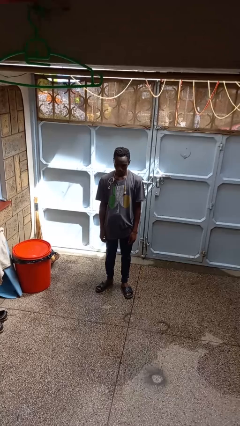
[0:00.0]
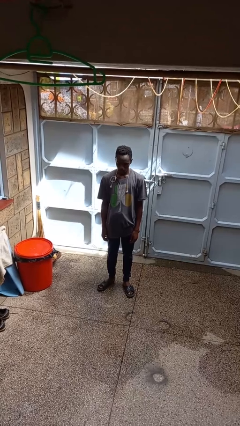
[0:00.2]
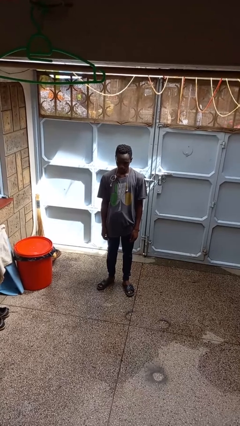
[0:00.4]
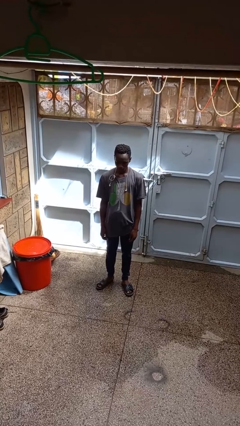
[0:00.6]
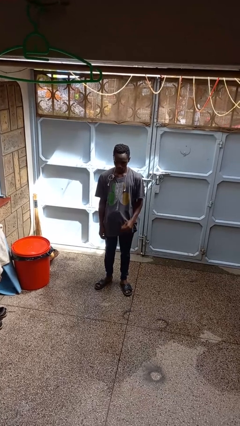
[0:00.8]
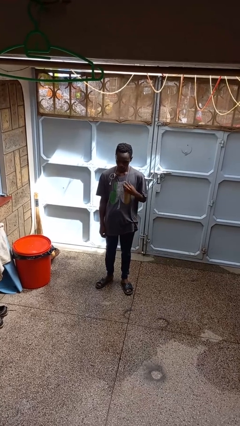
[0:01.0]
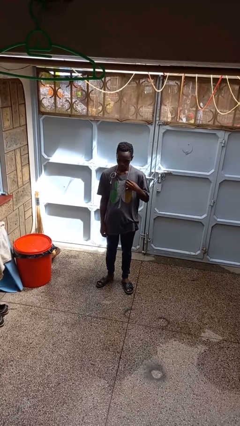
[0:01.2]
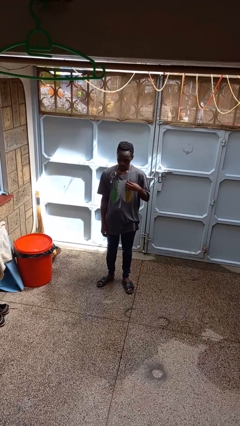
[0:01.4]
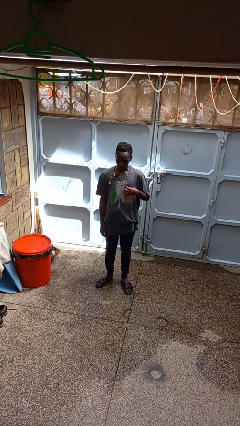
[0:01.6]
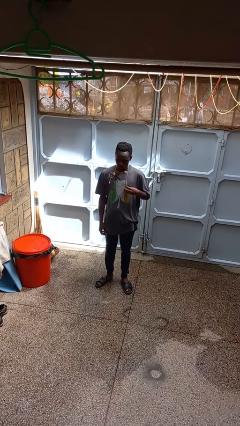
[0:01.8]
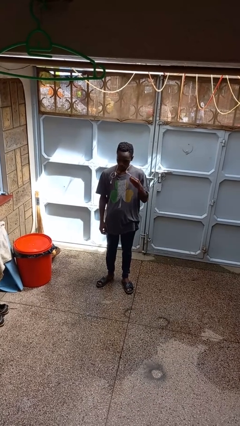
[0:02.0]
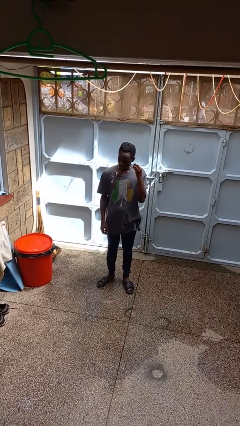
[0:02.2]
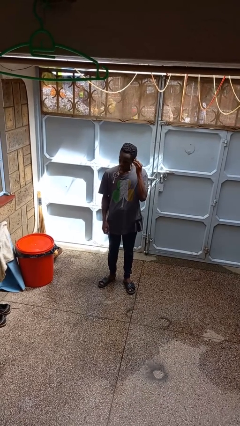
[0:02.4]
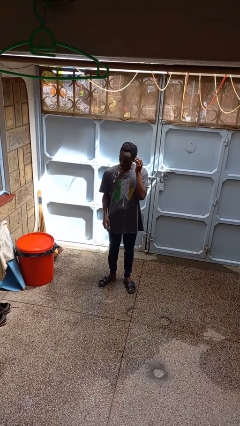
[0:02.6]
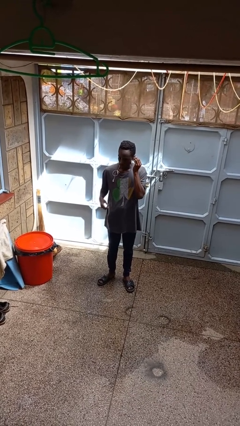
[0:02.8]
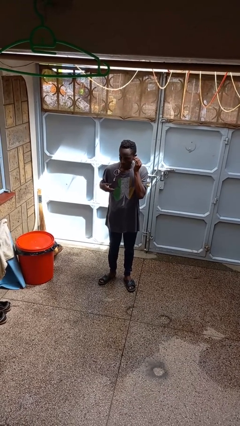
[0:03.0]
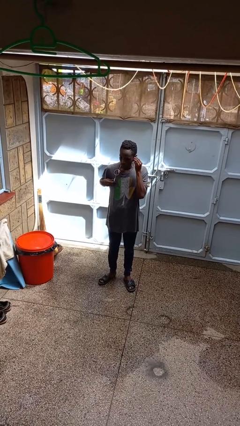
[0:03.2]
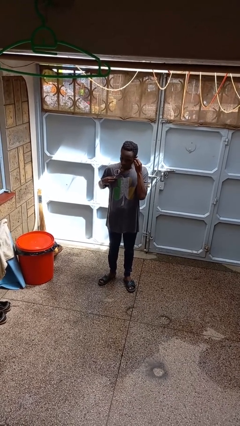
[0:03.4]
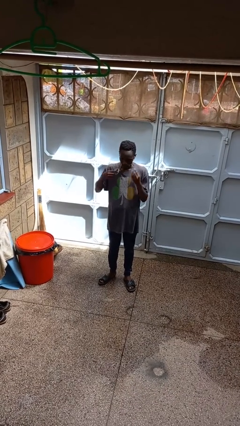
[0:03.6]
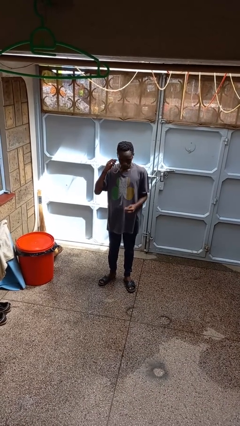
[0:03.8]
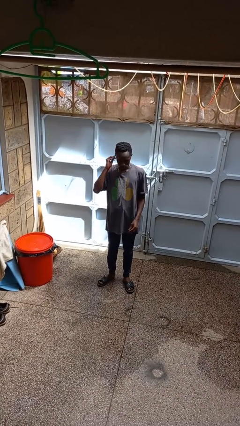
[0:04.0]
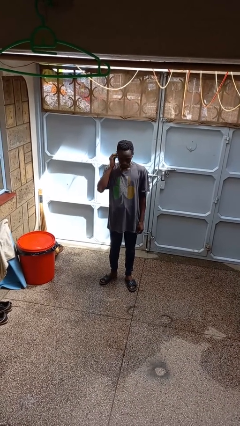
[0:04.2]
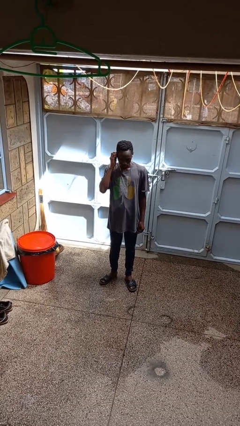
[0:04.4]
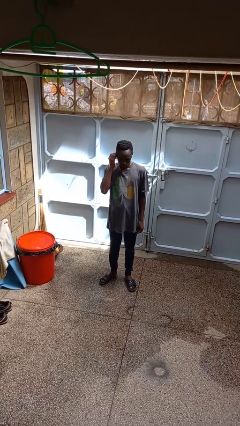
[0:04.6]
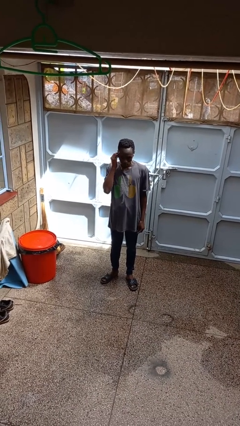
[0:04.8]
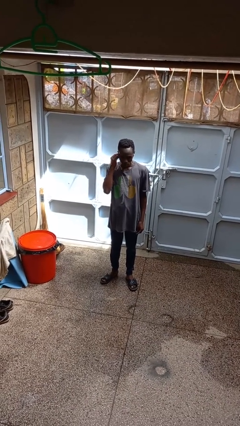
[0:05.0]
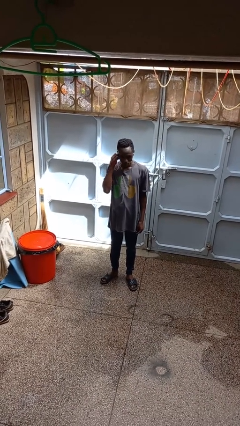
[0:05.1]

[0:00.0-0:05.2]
person puts on headphones

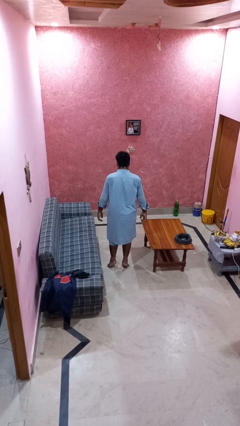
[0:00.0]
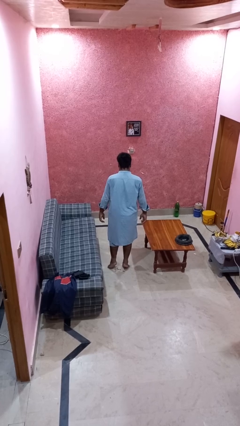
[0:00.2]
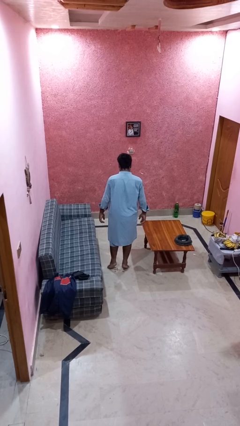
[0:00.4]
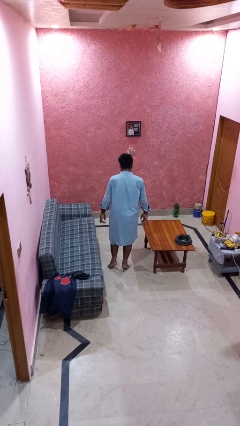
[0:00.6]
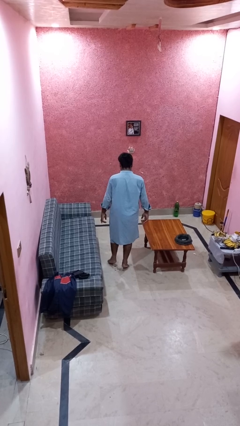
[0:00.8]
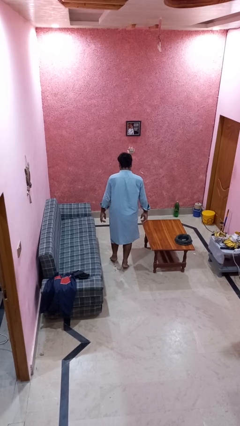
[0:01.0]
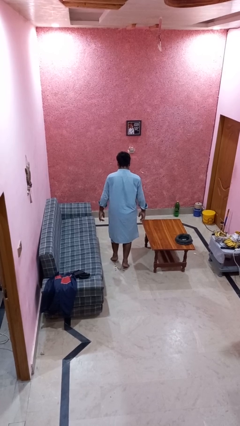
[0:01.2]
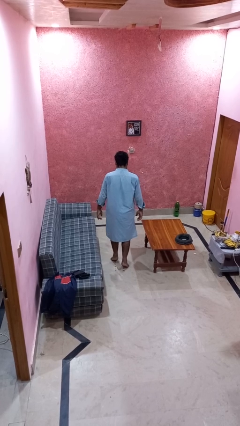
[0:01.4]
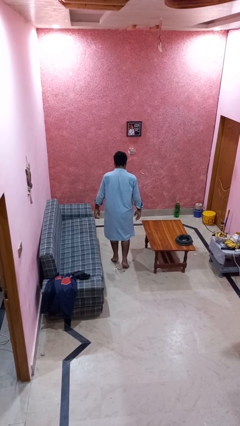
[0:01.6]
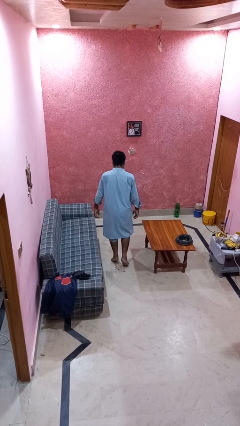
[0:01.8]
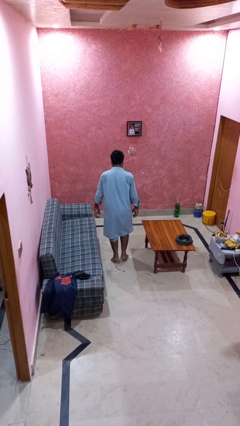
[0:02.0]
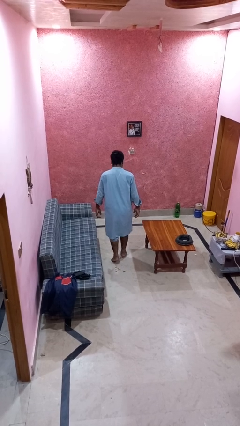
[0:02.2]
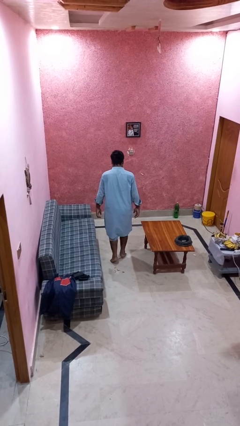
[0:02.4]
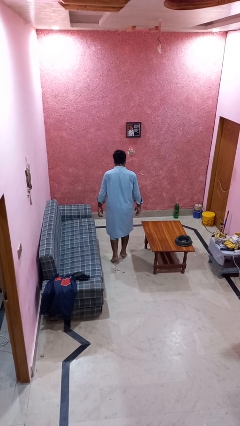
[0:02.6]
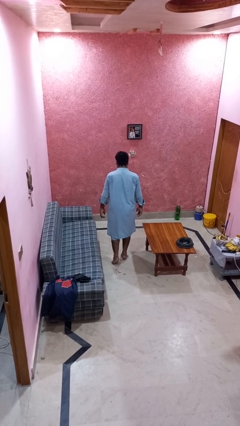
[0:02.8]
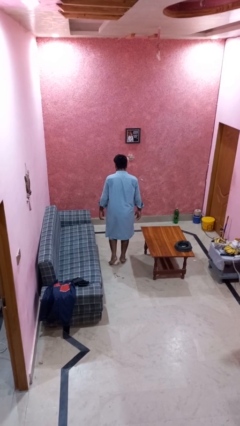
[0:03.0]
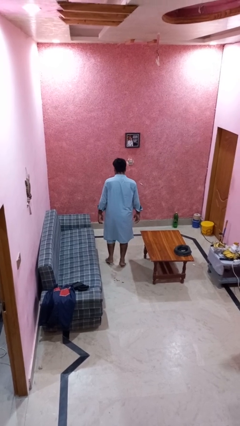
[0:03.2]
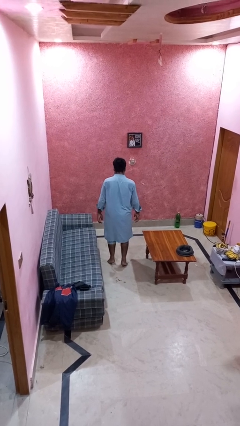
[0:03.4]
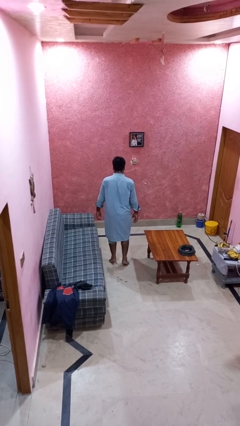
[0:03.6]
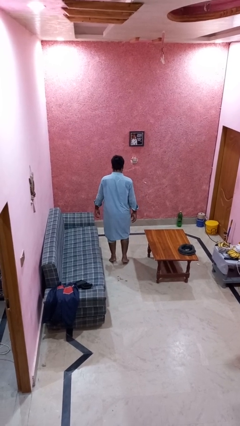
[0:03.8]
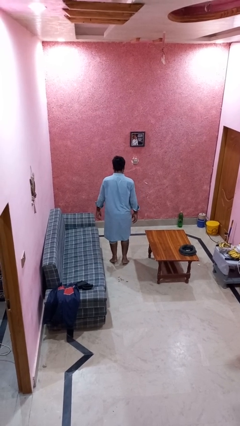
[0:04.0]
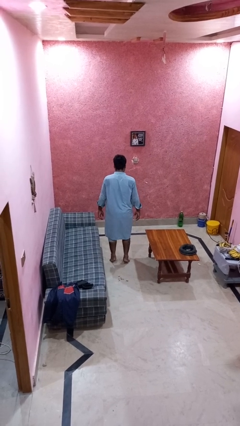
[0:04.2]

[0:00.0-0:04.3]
person walks tiptoe

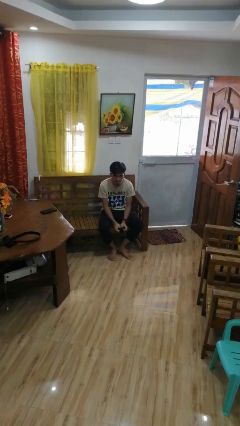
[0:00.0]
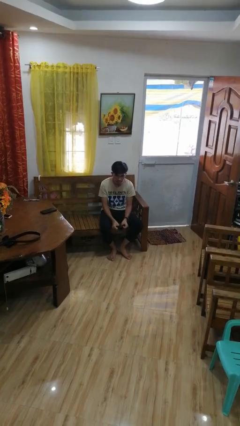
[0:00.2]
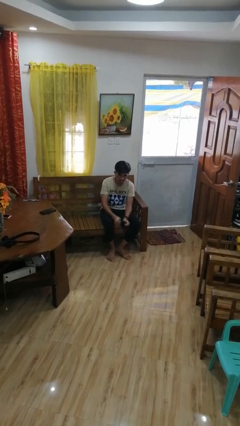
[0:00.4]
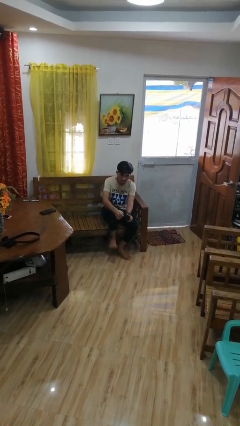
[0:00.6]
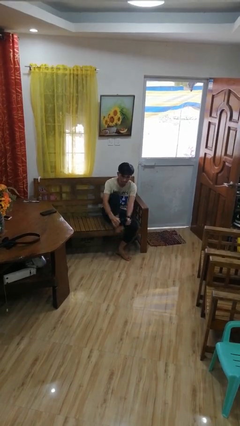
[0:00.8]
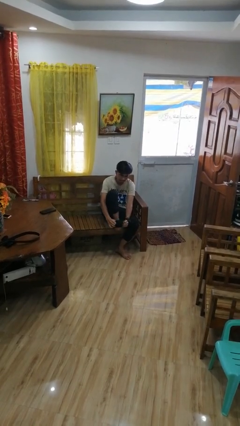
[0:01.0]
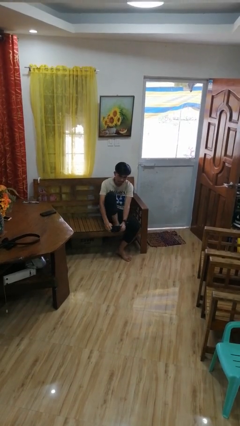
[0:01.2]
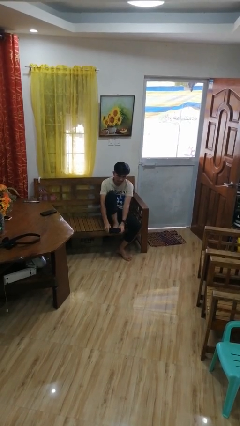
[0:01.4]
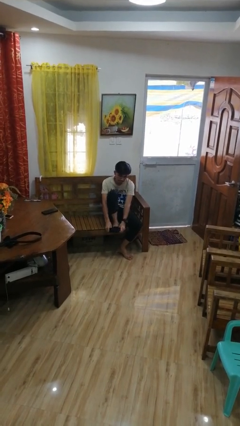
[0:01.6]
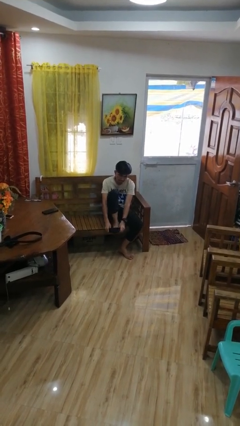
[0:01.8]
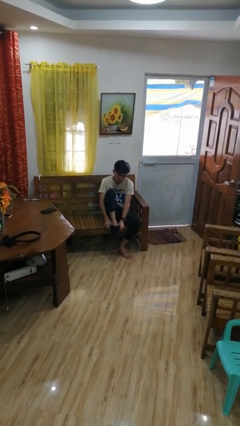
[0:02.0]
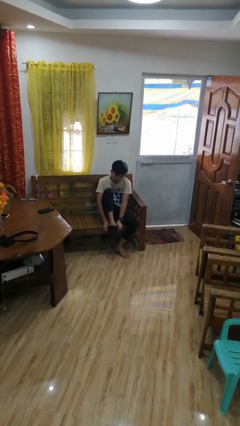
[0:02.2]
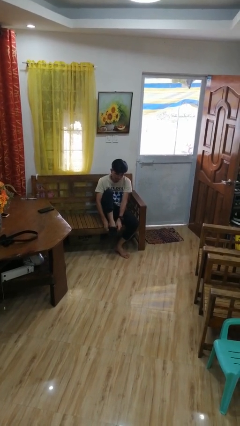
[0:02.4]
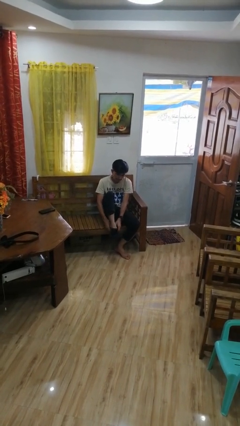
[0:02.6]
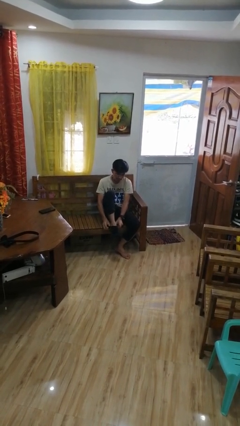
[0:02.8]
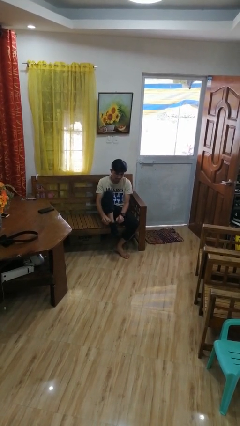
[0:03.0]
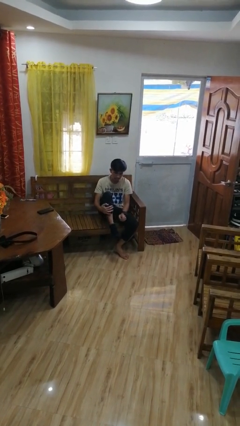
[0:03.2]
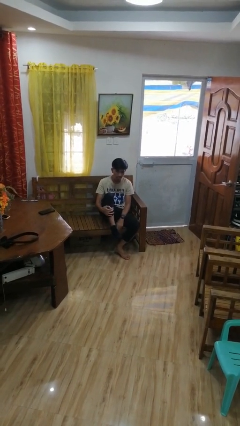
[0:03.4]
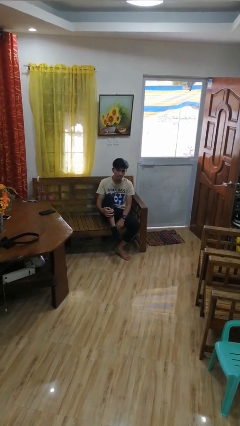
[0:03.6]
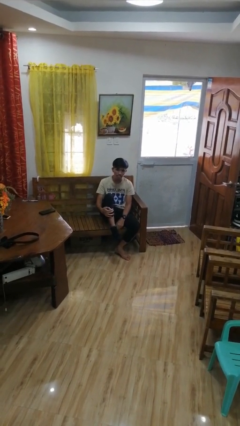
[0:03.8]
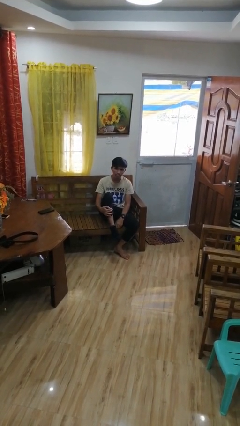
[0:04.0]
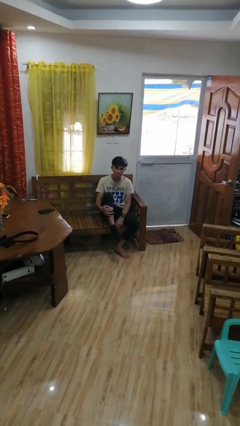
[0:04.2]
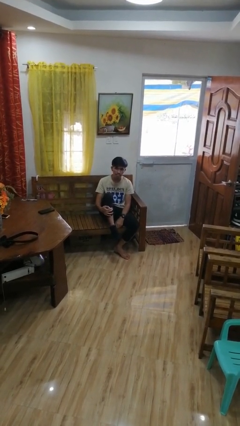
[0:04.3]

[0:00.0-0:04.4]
person puts on socks

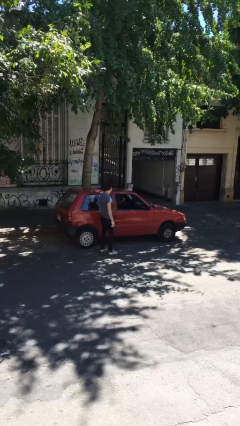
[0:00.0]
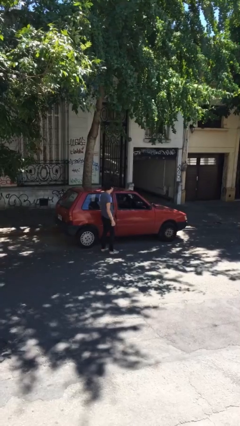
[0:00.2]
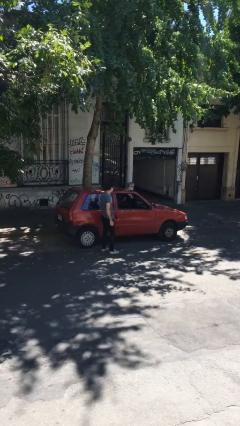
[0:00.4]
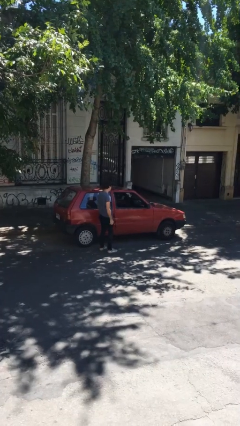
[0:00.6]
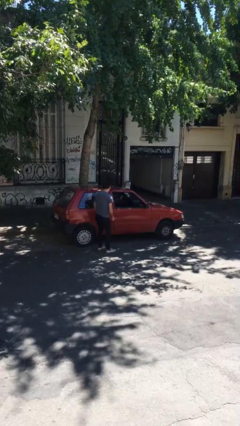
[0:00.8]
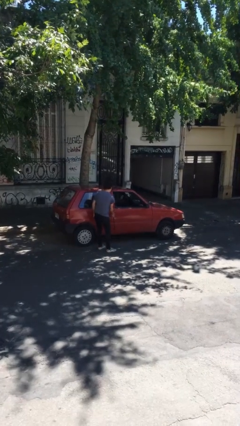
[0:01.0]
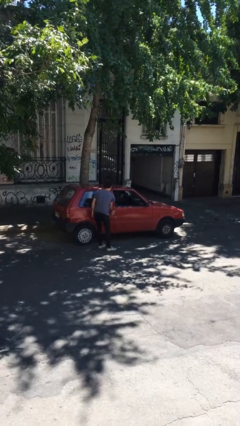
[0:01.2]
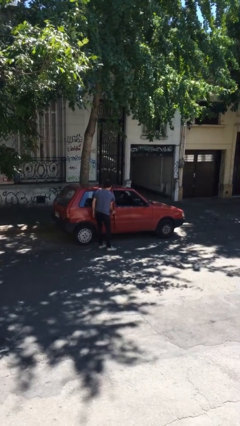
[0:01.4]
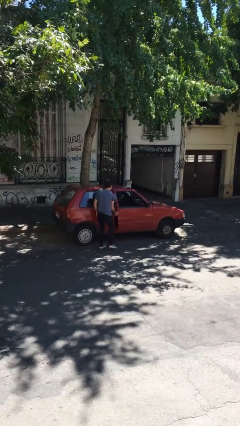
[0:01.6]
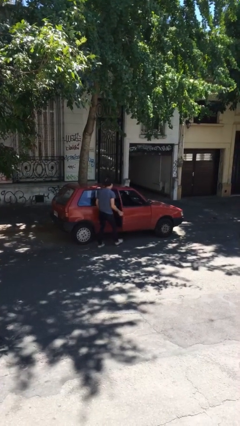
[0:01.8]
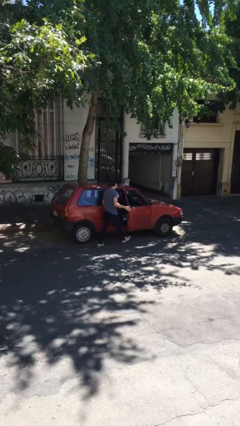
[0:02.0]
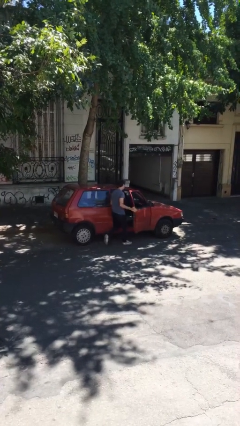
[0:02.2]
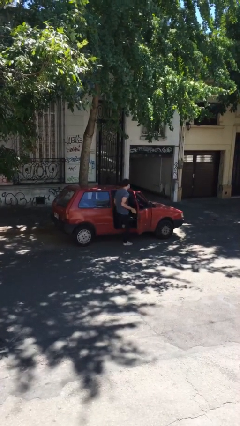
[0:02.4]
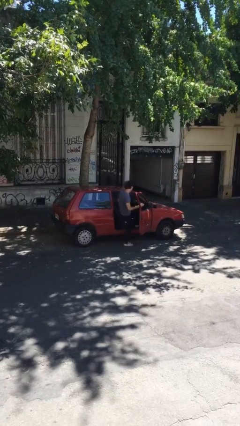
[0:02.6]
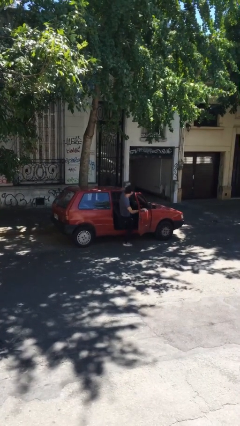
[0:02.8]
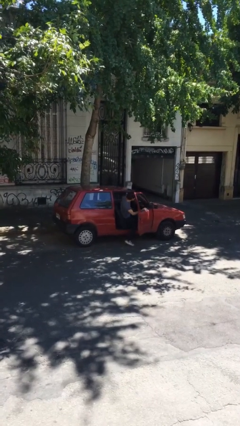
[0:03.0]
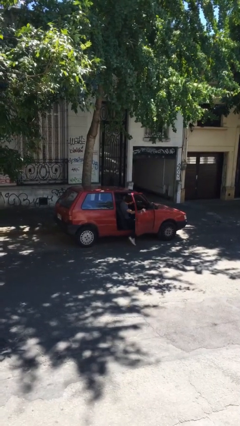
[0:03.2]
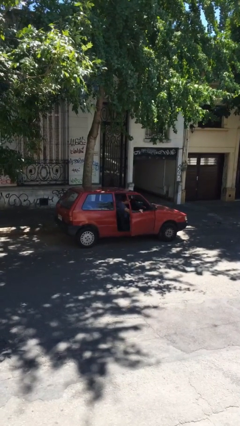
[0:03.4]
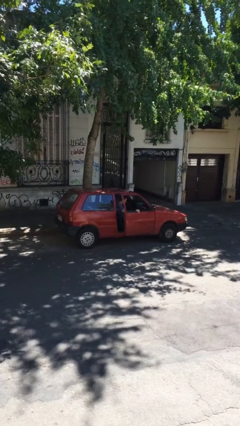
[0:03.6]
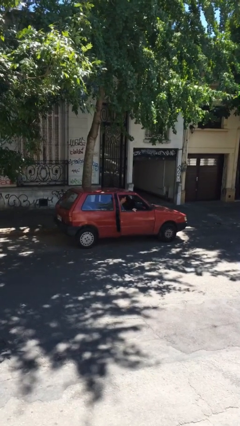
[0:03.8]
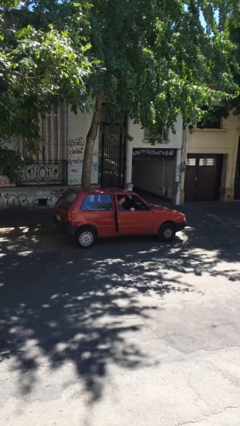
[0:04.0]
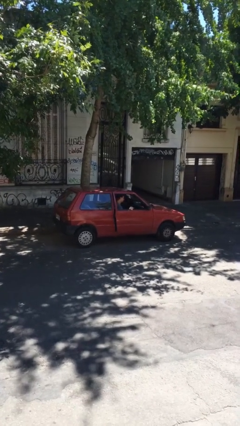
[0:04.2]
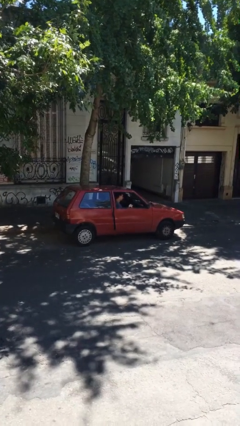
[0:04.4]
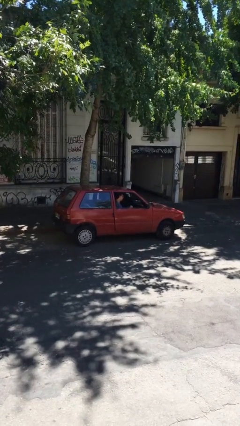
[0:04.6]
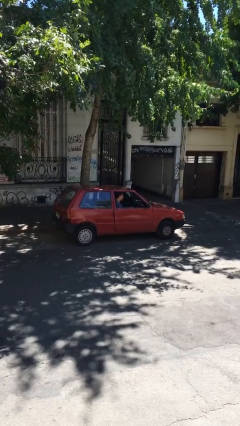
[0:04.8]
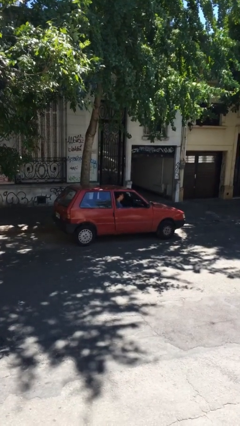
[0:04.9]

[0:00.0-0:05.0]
car picks up person
